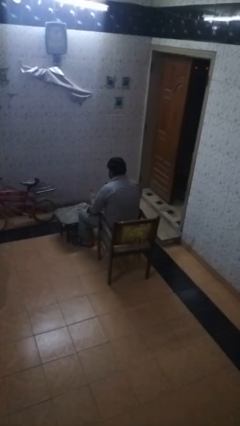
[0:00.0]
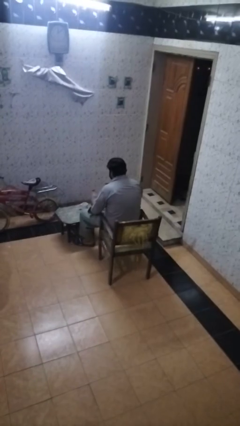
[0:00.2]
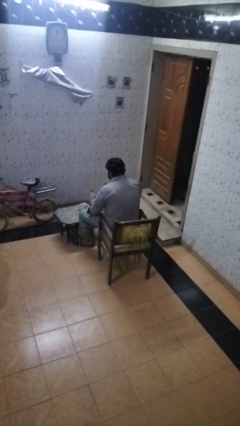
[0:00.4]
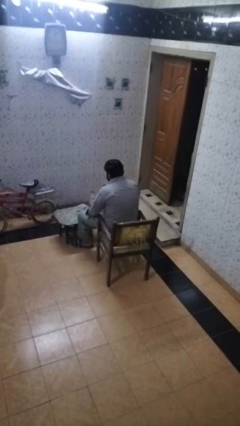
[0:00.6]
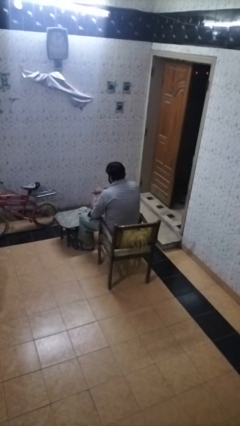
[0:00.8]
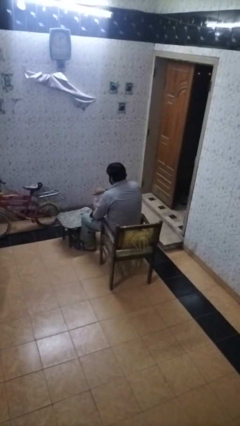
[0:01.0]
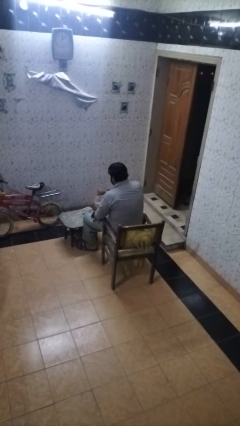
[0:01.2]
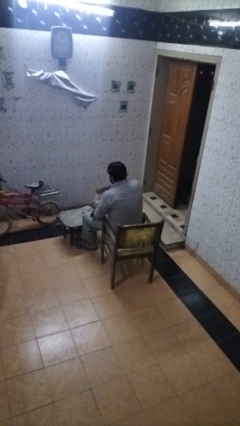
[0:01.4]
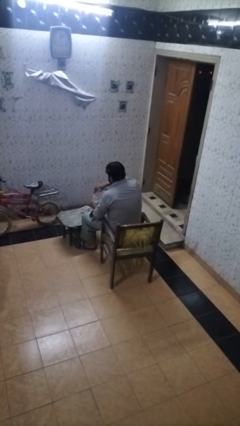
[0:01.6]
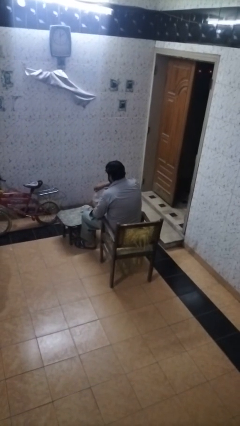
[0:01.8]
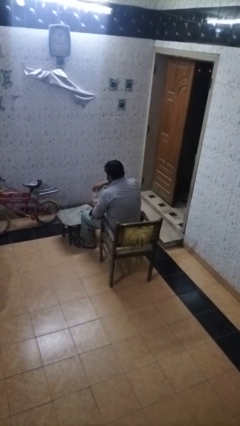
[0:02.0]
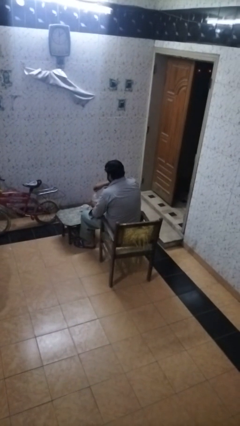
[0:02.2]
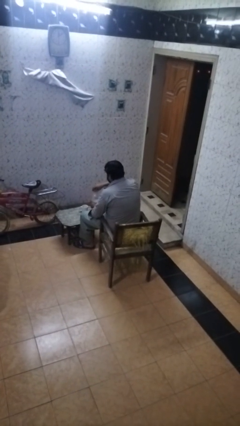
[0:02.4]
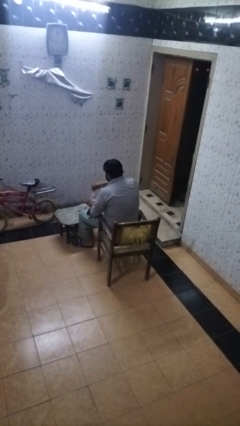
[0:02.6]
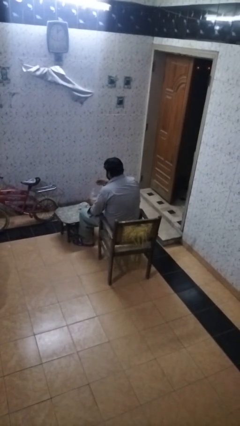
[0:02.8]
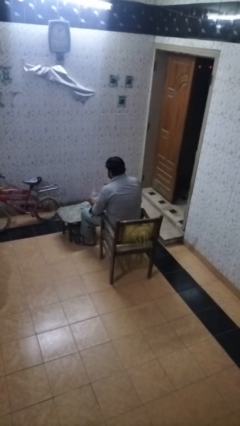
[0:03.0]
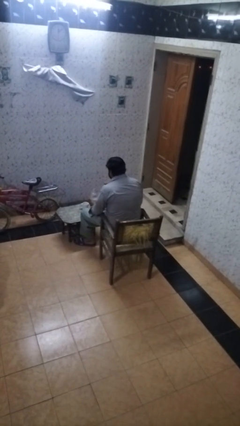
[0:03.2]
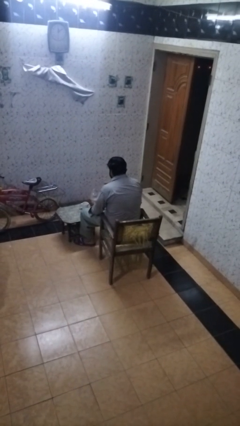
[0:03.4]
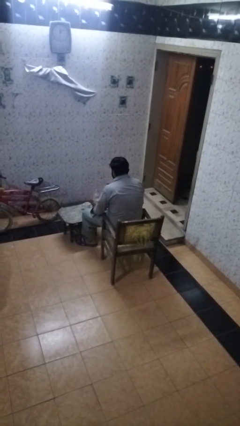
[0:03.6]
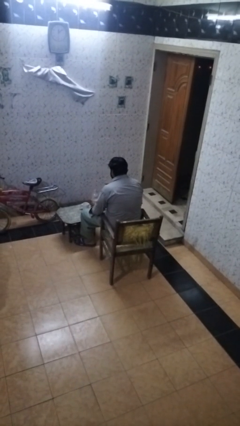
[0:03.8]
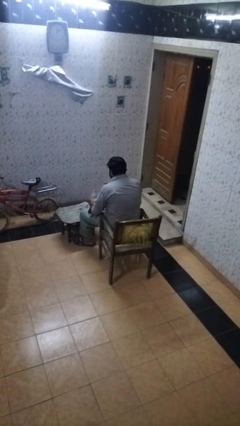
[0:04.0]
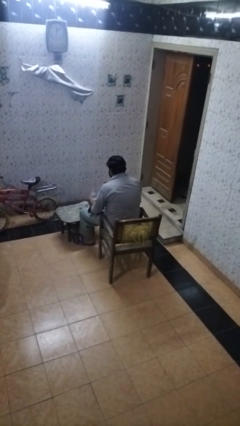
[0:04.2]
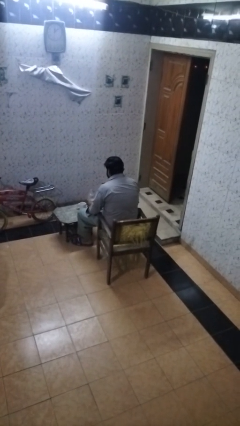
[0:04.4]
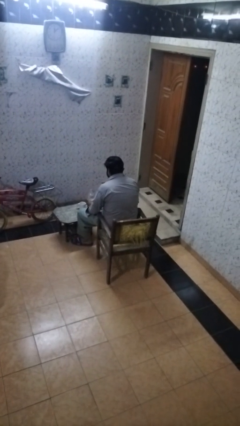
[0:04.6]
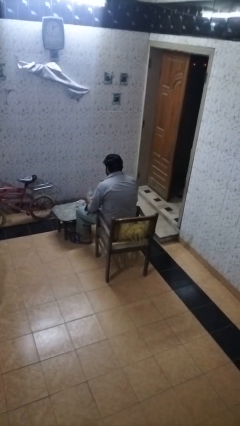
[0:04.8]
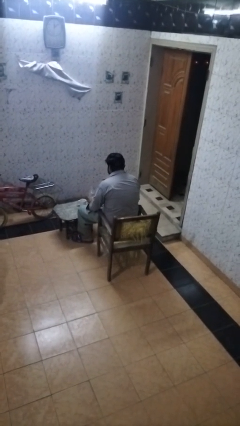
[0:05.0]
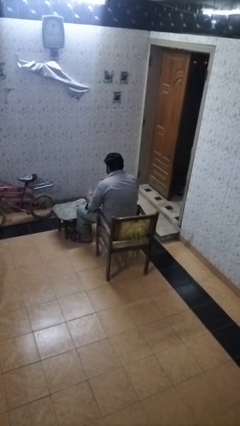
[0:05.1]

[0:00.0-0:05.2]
person unscrews lid from bottle

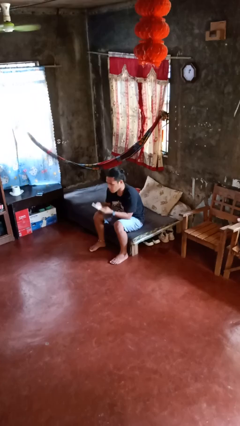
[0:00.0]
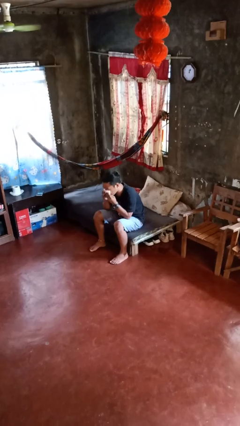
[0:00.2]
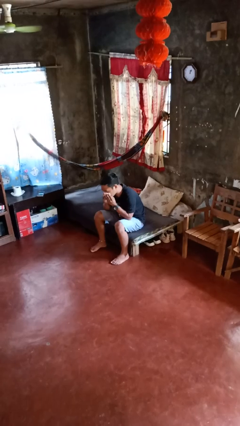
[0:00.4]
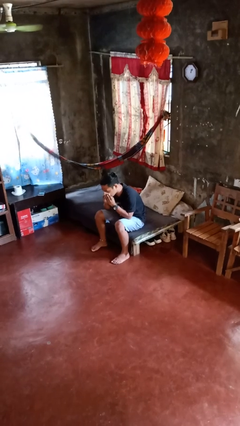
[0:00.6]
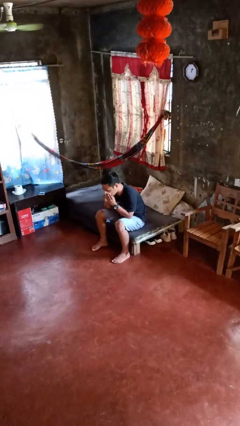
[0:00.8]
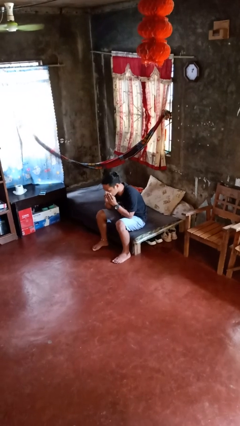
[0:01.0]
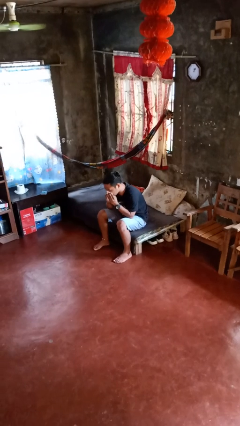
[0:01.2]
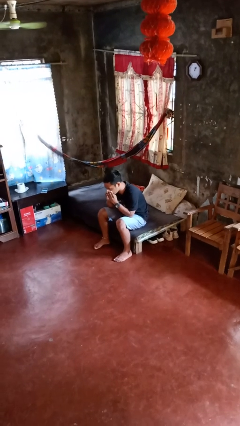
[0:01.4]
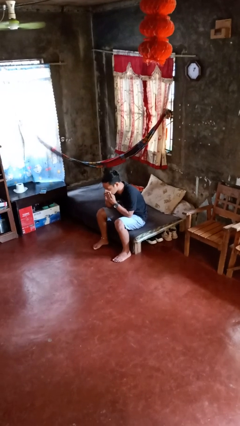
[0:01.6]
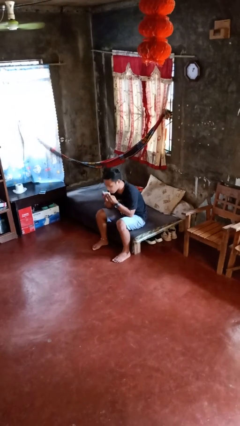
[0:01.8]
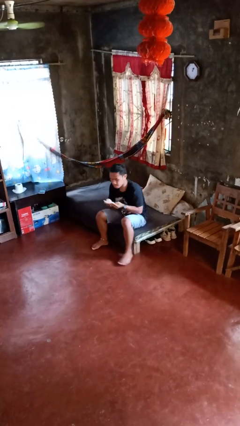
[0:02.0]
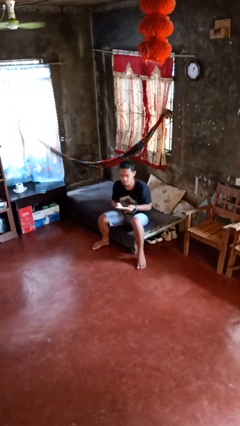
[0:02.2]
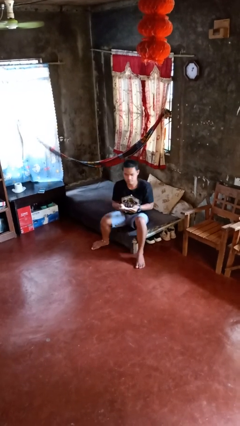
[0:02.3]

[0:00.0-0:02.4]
person blows nose

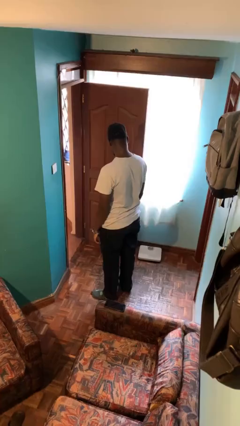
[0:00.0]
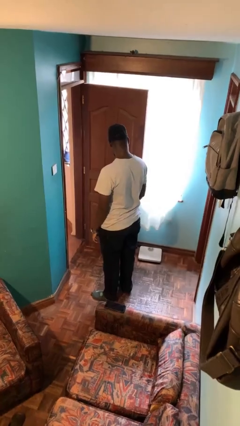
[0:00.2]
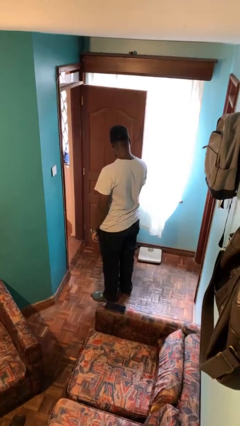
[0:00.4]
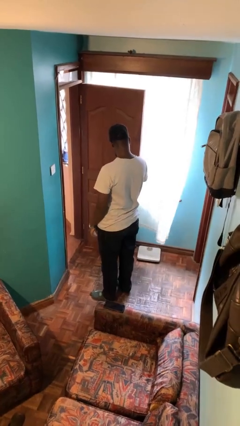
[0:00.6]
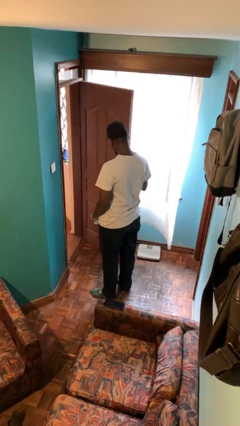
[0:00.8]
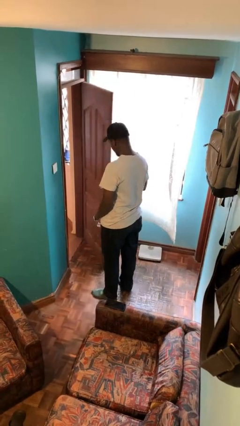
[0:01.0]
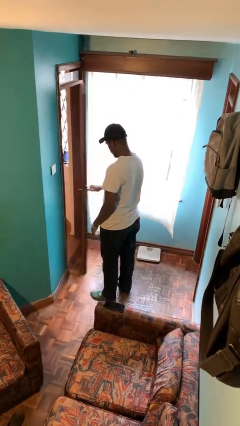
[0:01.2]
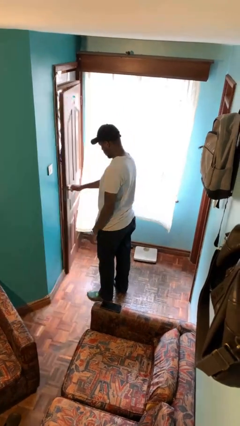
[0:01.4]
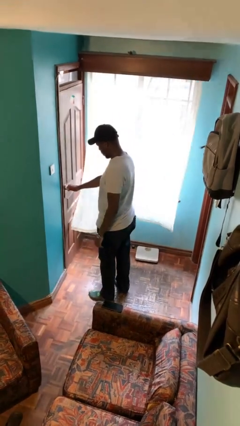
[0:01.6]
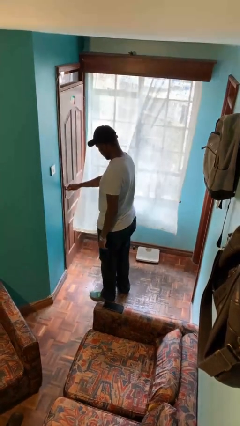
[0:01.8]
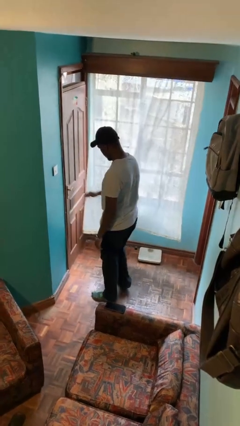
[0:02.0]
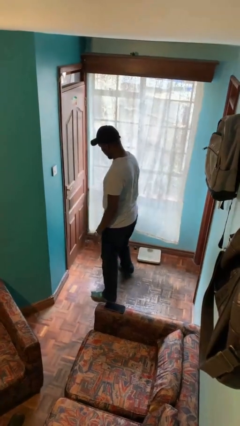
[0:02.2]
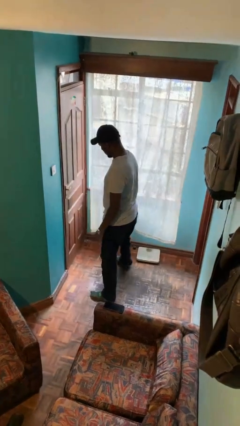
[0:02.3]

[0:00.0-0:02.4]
person closes facility door

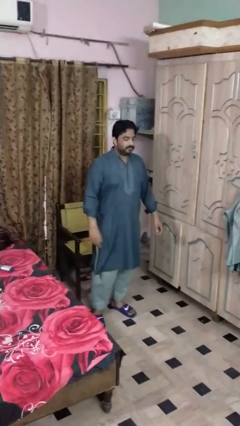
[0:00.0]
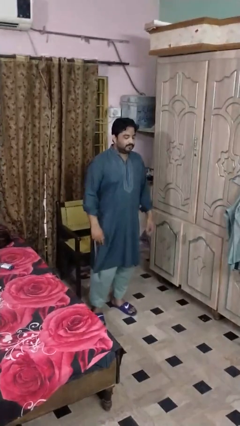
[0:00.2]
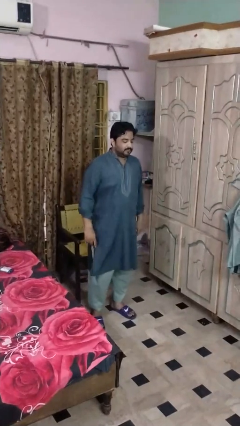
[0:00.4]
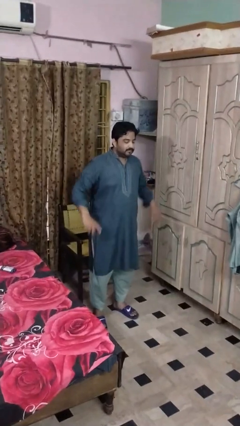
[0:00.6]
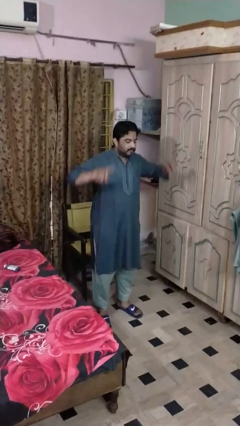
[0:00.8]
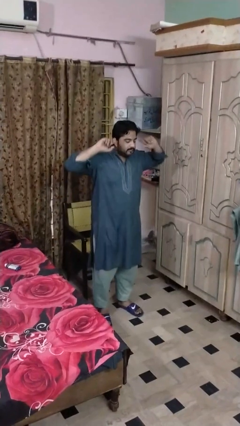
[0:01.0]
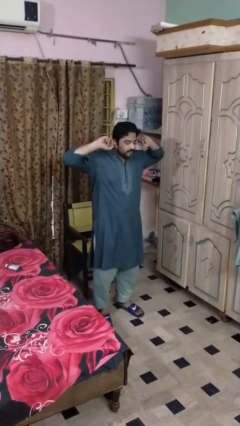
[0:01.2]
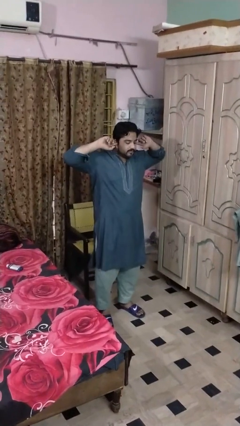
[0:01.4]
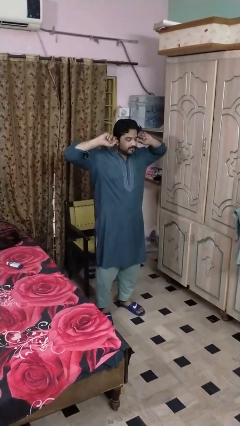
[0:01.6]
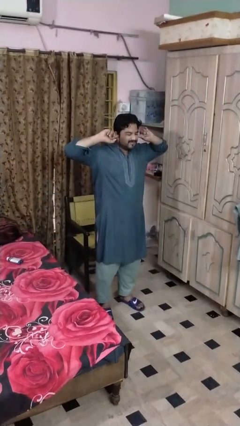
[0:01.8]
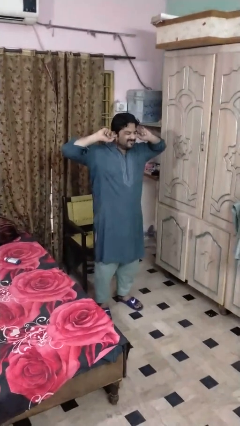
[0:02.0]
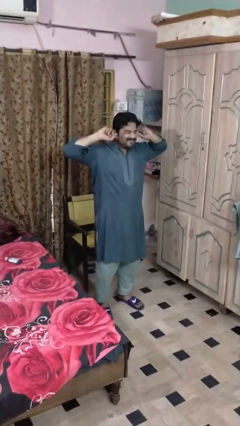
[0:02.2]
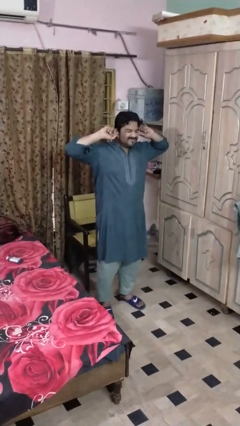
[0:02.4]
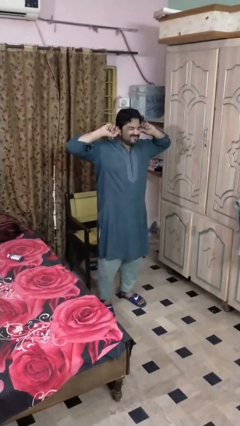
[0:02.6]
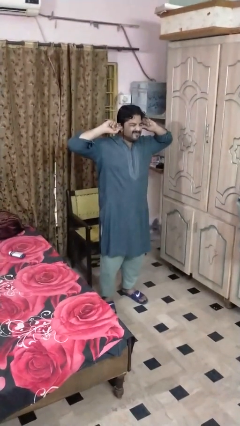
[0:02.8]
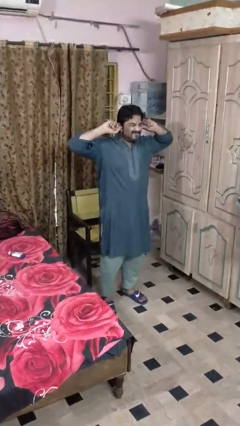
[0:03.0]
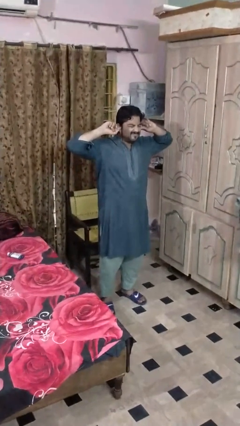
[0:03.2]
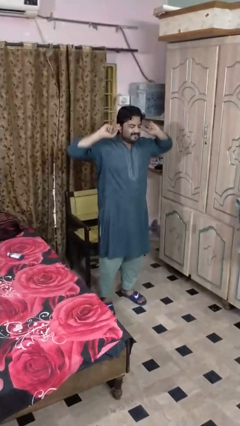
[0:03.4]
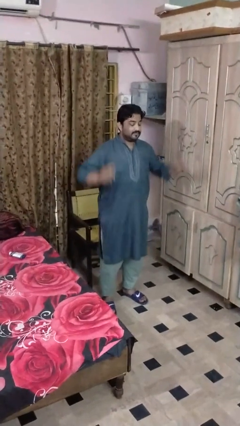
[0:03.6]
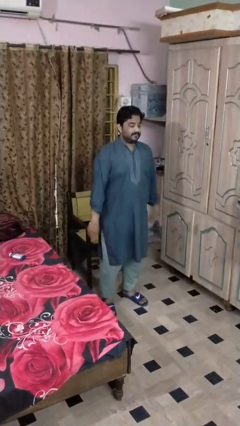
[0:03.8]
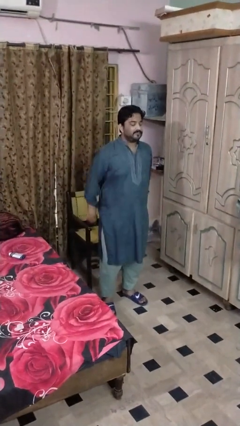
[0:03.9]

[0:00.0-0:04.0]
person puts fingers in ear

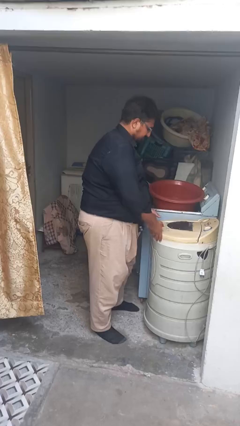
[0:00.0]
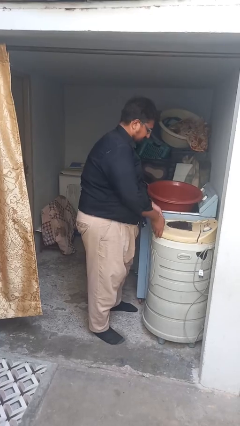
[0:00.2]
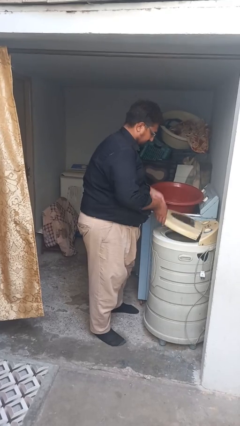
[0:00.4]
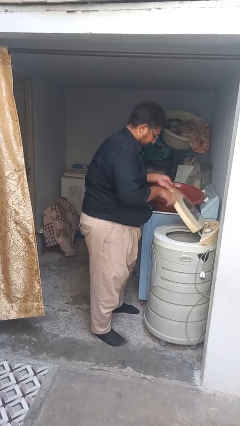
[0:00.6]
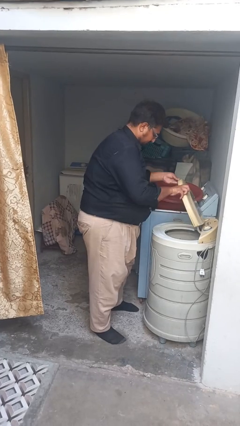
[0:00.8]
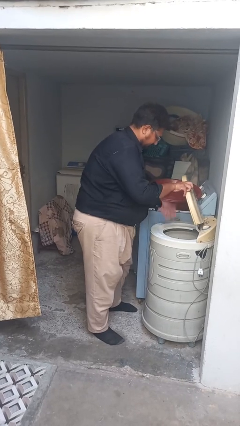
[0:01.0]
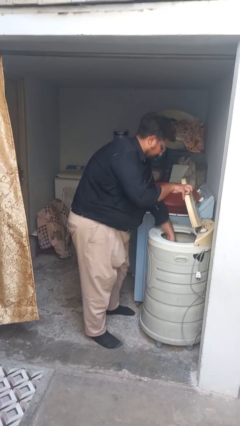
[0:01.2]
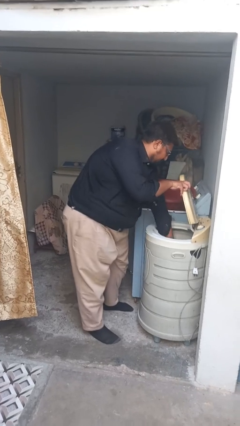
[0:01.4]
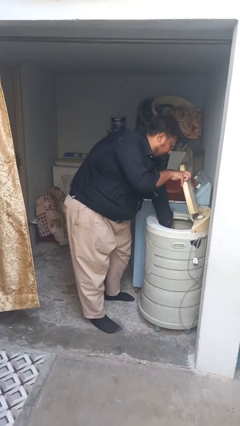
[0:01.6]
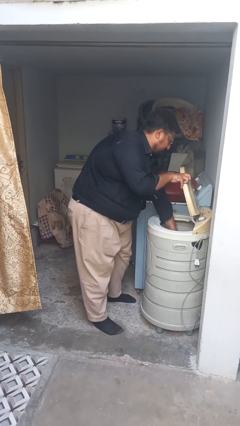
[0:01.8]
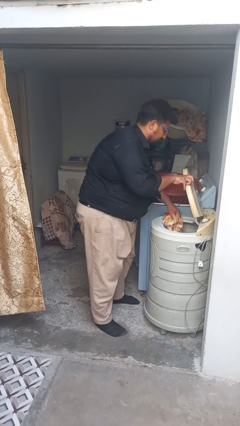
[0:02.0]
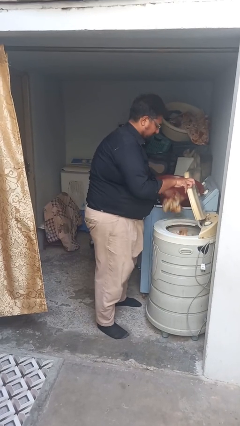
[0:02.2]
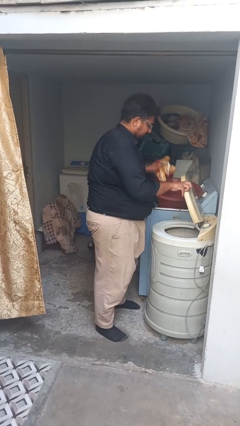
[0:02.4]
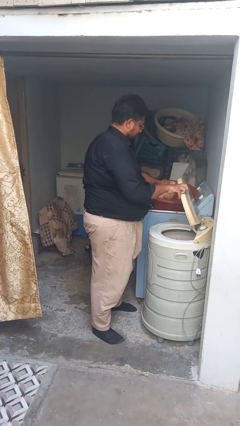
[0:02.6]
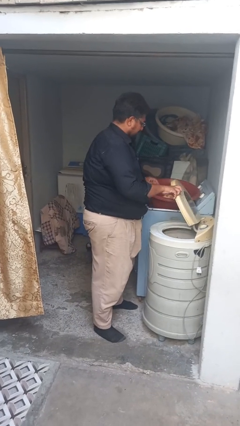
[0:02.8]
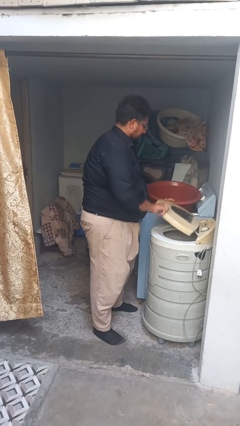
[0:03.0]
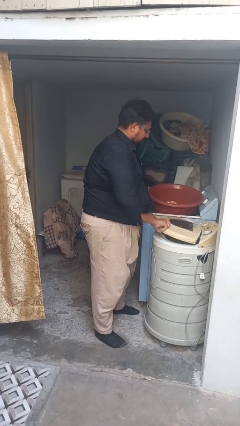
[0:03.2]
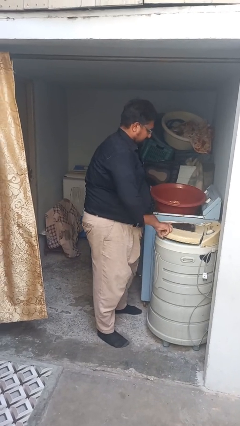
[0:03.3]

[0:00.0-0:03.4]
person unloads clotheswasher
